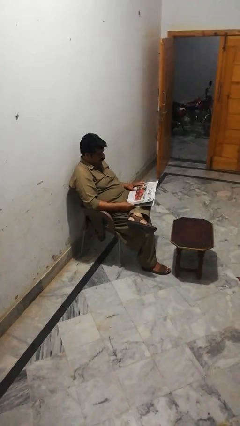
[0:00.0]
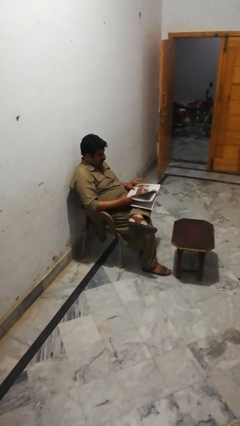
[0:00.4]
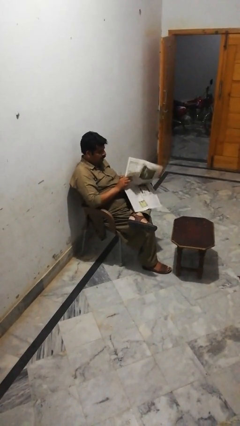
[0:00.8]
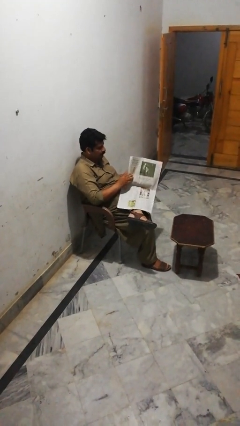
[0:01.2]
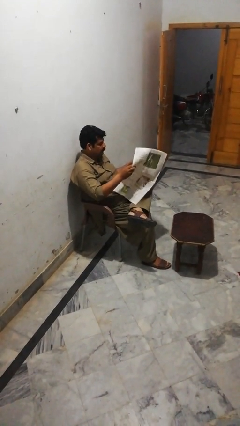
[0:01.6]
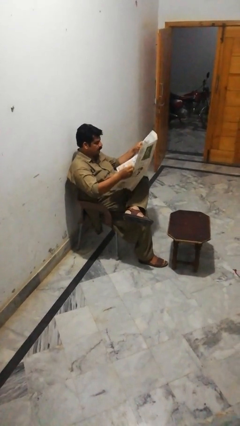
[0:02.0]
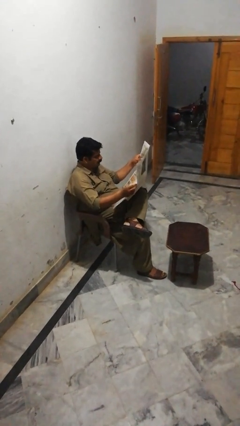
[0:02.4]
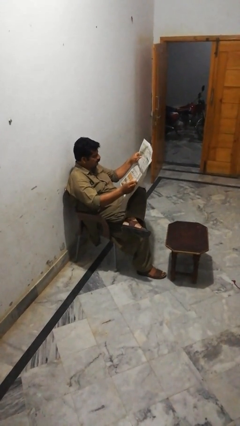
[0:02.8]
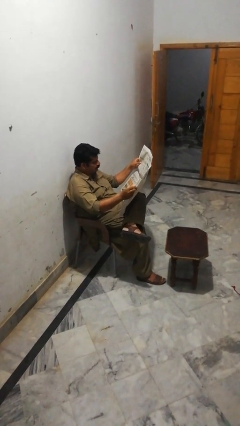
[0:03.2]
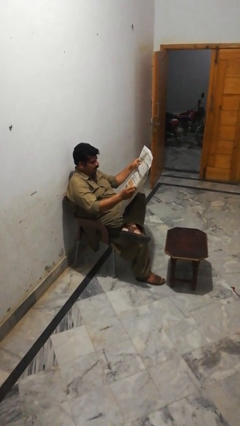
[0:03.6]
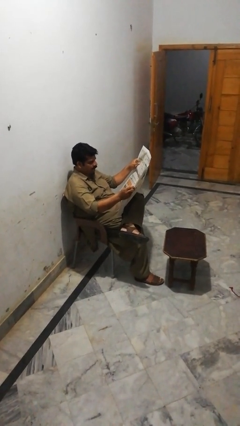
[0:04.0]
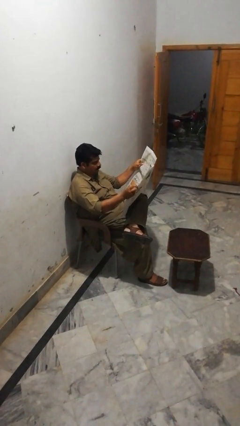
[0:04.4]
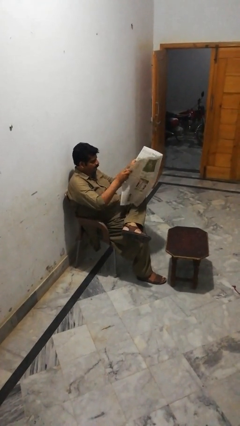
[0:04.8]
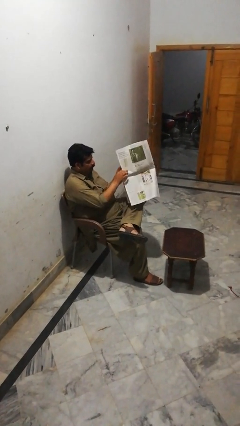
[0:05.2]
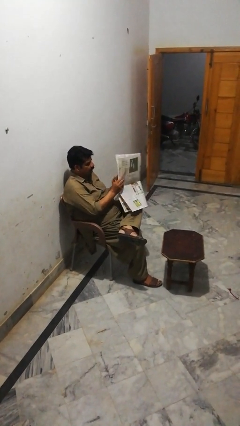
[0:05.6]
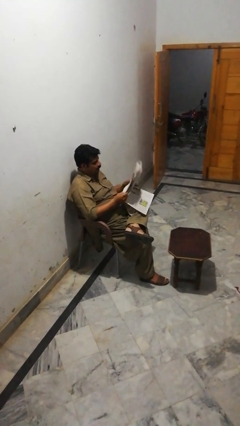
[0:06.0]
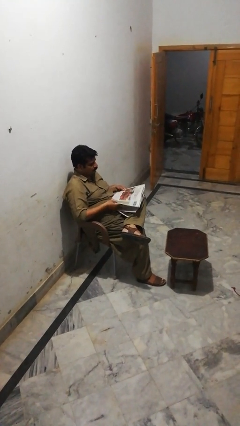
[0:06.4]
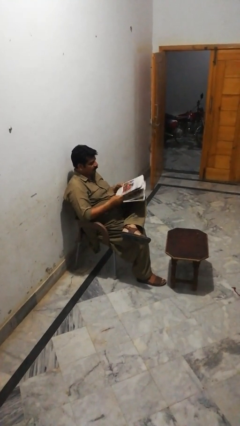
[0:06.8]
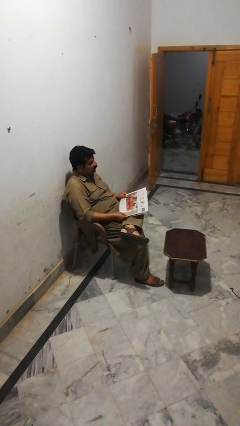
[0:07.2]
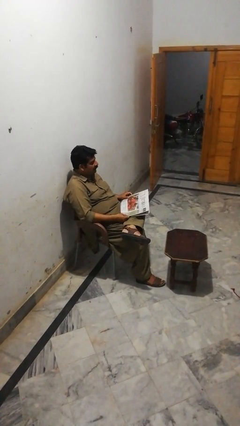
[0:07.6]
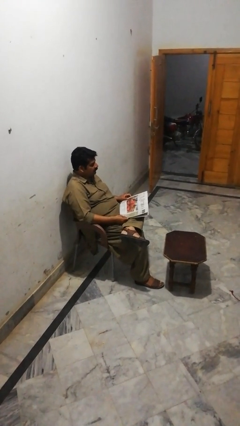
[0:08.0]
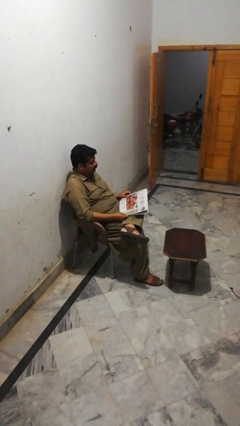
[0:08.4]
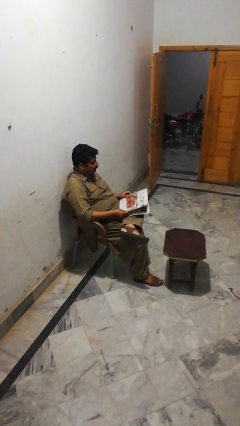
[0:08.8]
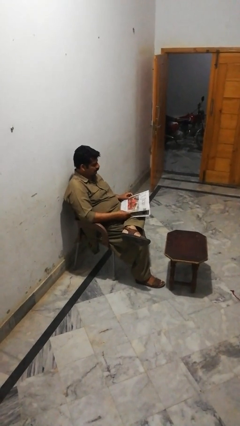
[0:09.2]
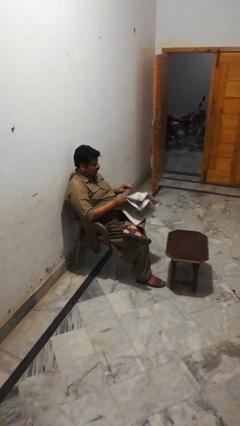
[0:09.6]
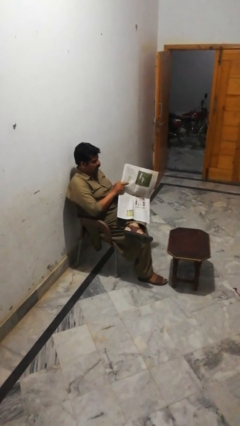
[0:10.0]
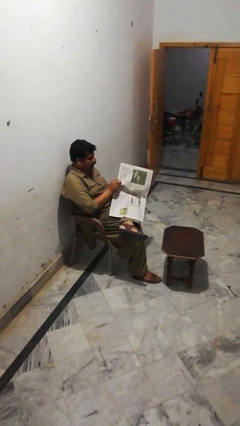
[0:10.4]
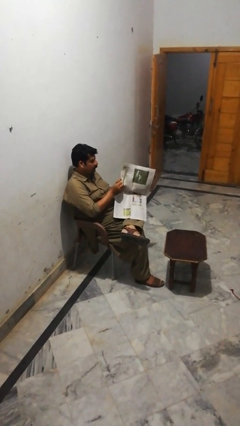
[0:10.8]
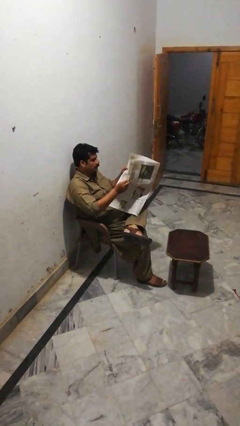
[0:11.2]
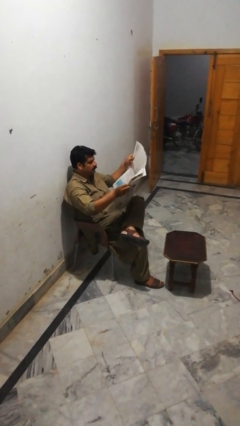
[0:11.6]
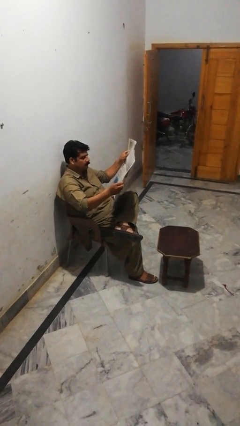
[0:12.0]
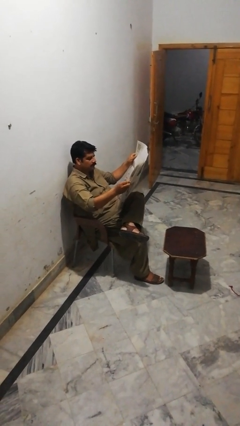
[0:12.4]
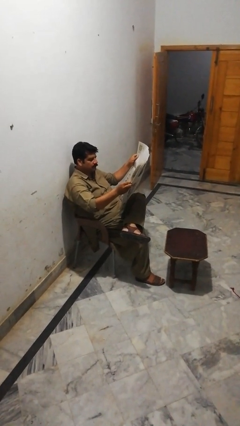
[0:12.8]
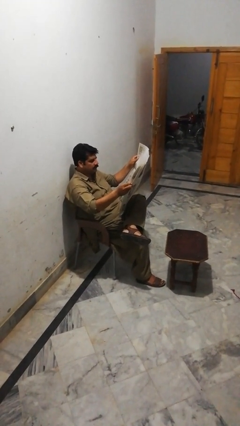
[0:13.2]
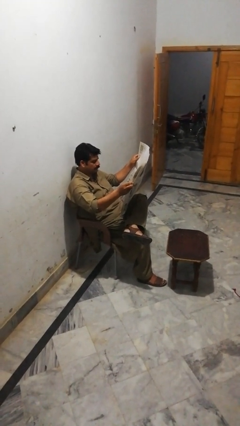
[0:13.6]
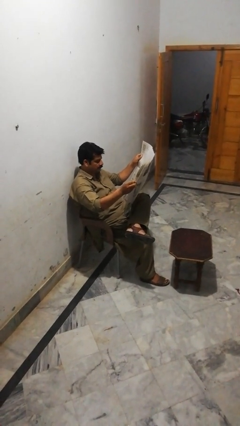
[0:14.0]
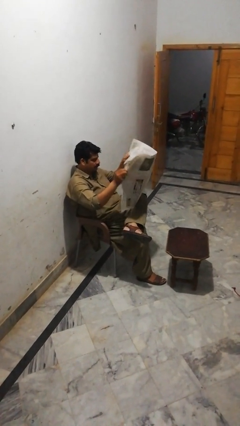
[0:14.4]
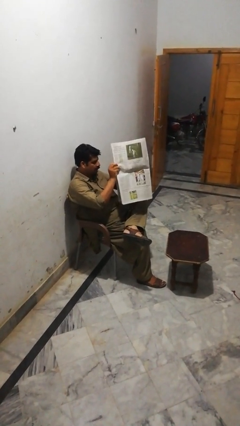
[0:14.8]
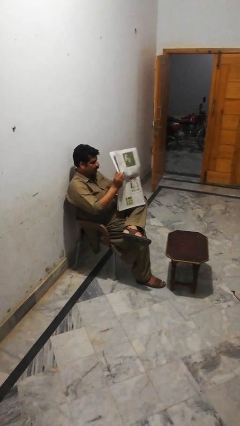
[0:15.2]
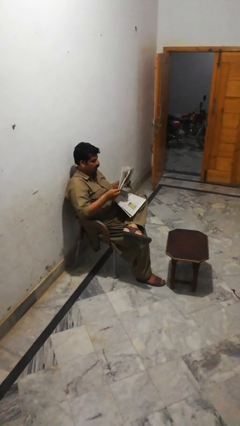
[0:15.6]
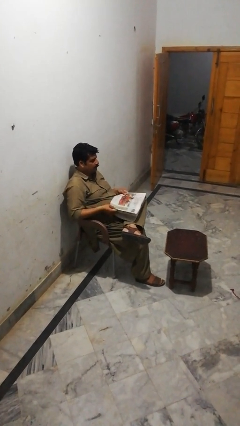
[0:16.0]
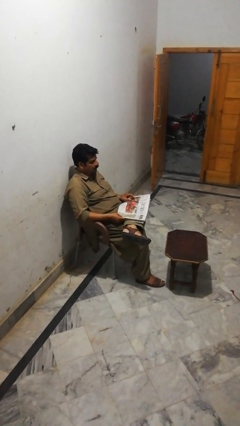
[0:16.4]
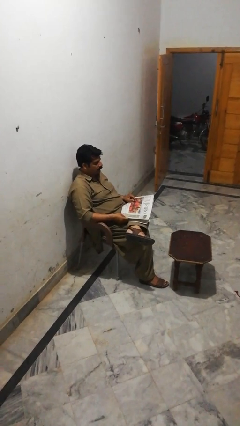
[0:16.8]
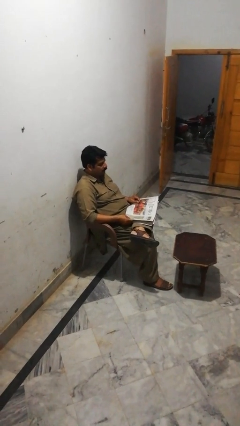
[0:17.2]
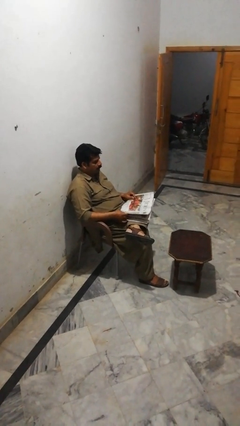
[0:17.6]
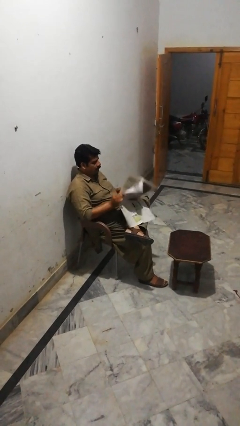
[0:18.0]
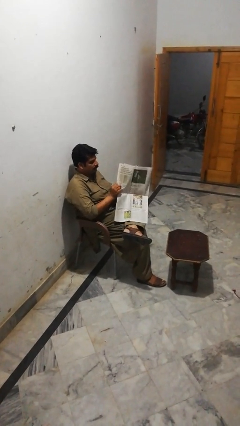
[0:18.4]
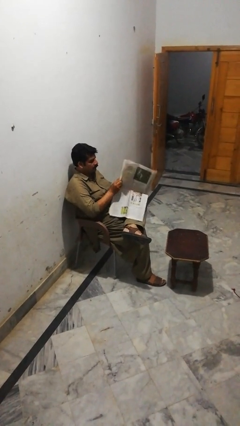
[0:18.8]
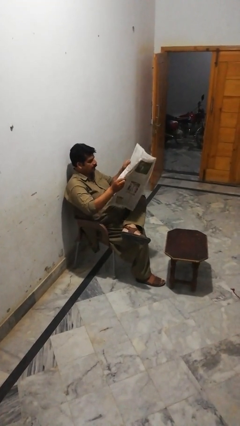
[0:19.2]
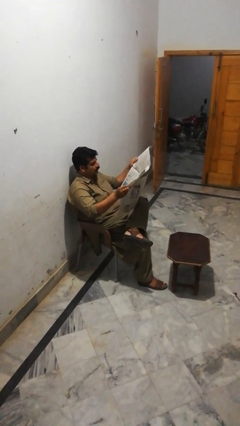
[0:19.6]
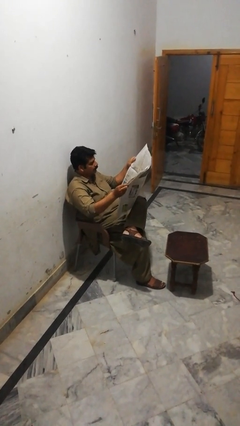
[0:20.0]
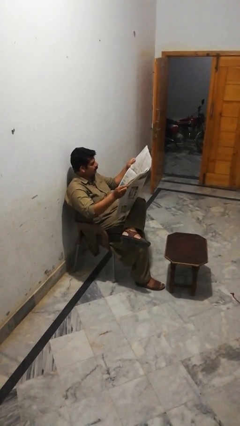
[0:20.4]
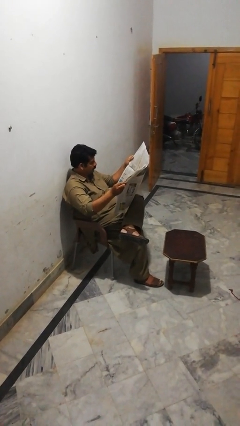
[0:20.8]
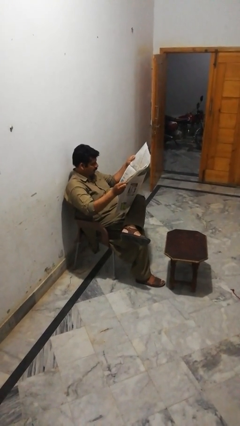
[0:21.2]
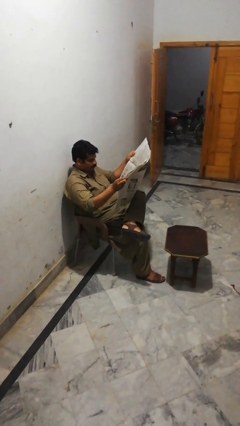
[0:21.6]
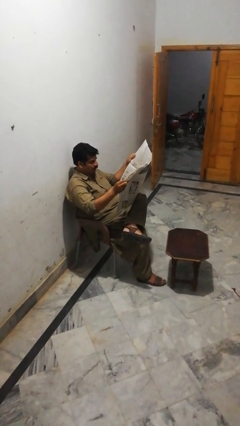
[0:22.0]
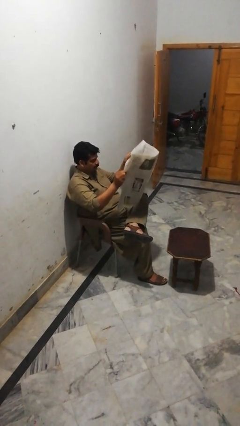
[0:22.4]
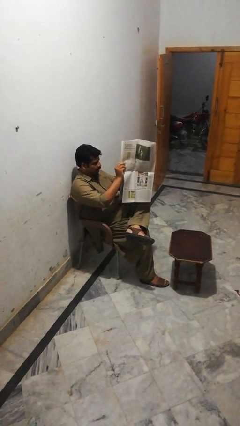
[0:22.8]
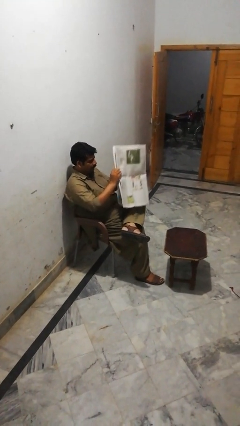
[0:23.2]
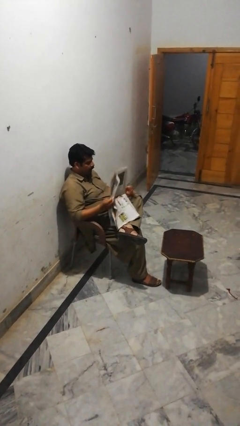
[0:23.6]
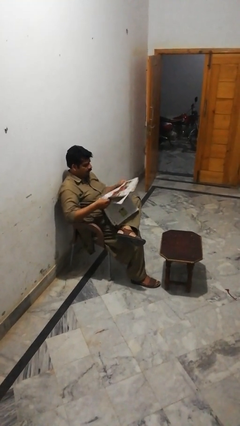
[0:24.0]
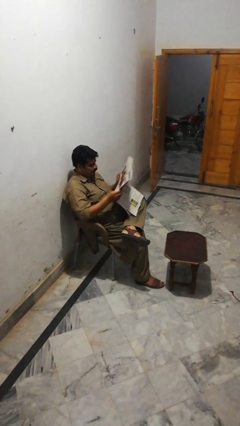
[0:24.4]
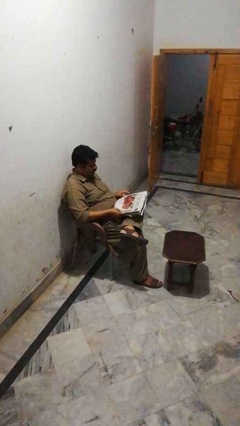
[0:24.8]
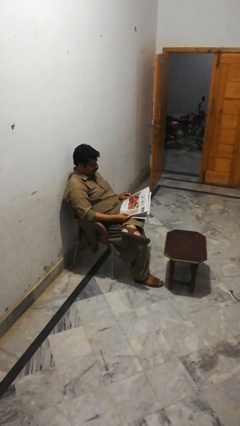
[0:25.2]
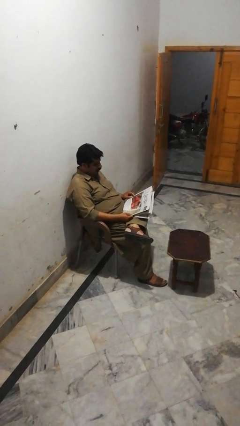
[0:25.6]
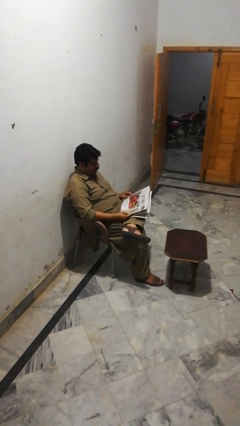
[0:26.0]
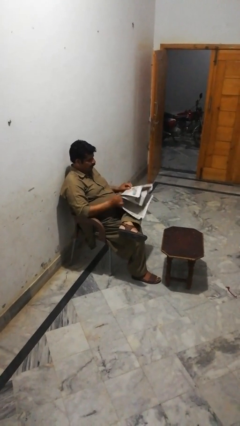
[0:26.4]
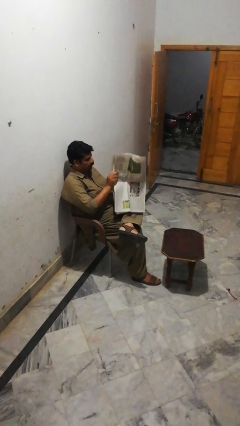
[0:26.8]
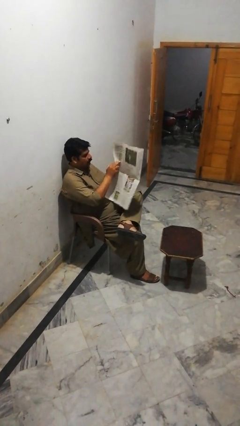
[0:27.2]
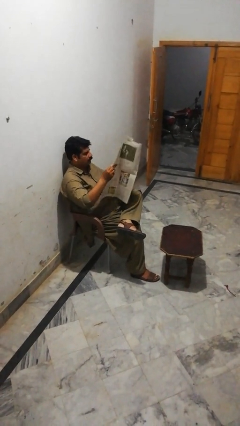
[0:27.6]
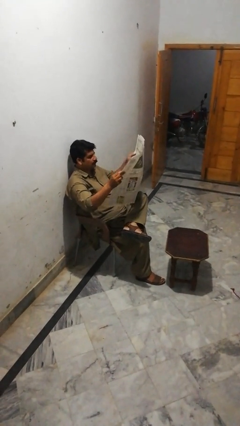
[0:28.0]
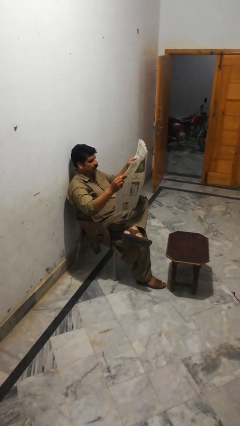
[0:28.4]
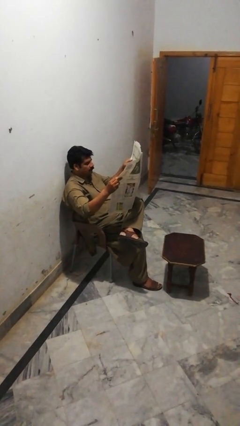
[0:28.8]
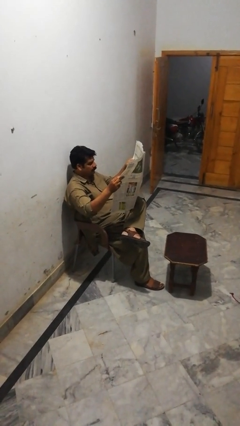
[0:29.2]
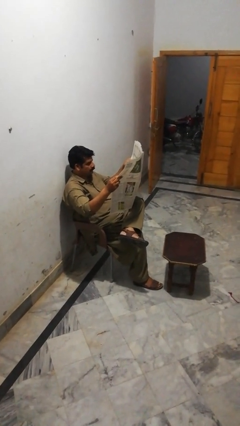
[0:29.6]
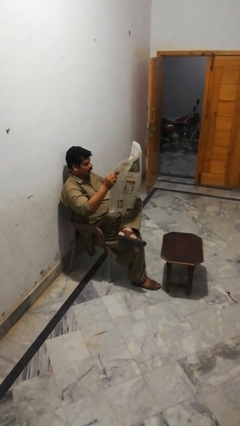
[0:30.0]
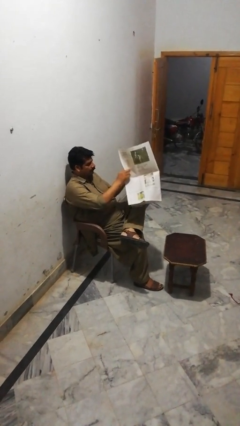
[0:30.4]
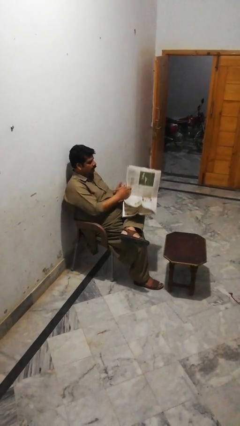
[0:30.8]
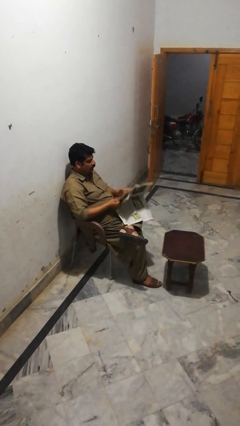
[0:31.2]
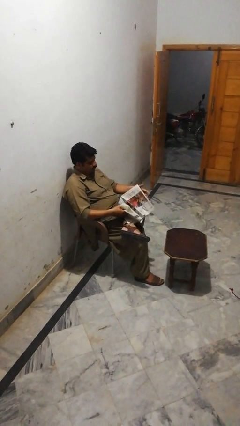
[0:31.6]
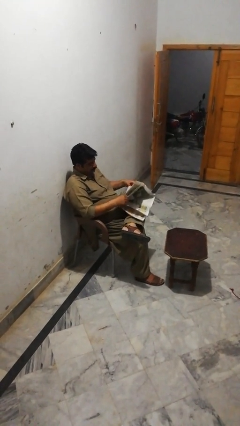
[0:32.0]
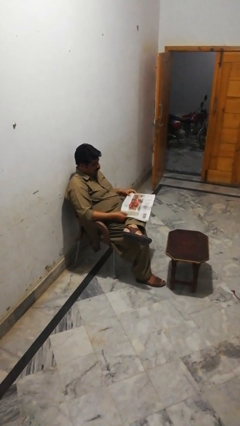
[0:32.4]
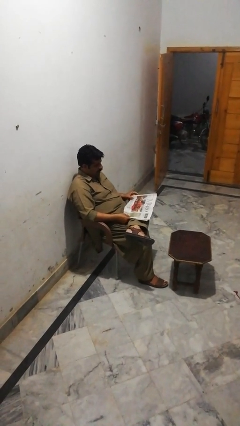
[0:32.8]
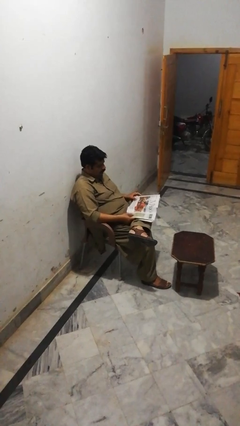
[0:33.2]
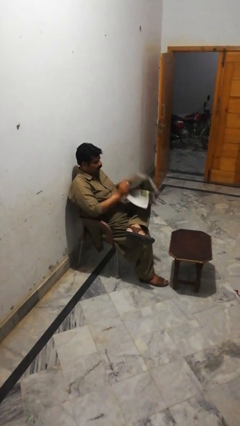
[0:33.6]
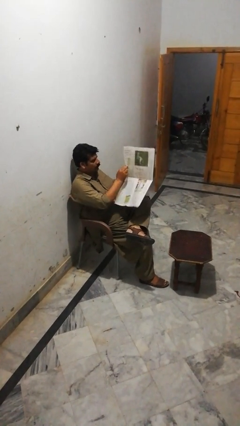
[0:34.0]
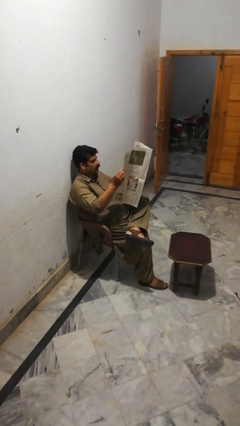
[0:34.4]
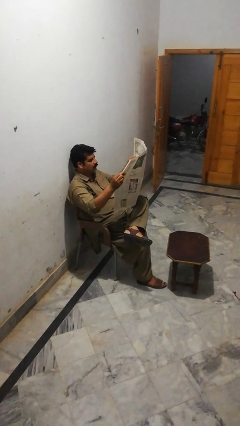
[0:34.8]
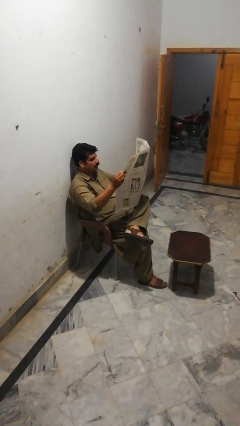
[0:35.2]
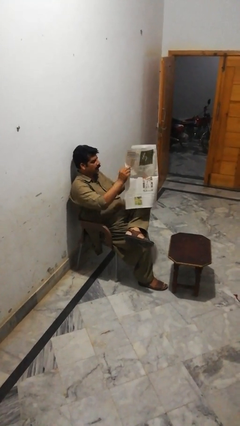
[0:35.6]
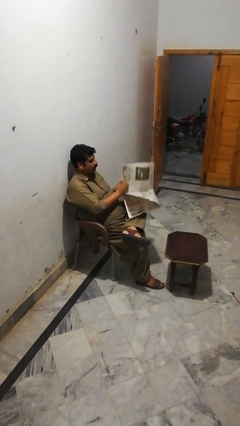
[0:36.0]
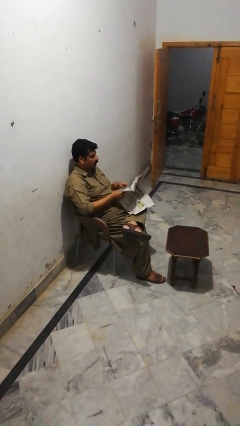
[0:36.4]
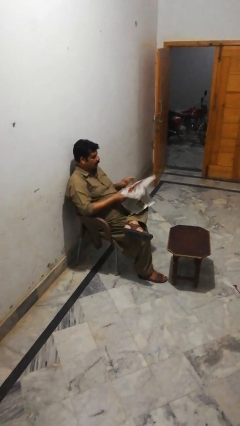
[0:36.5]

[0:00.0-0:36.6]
person reads newspaper
